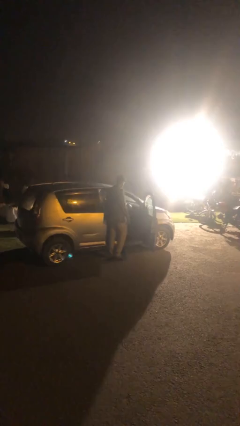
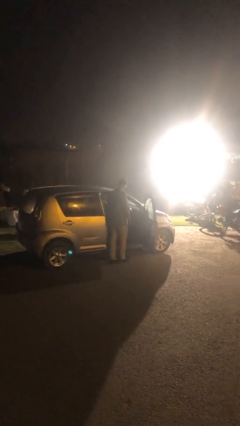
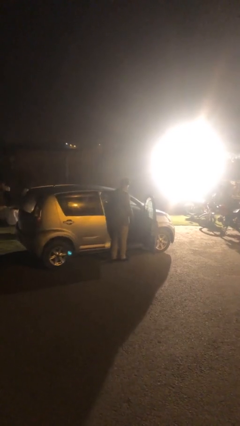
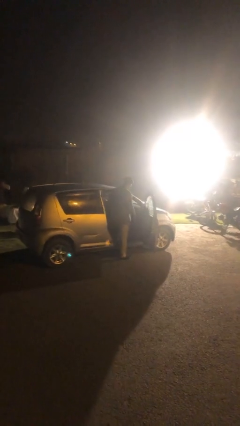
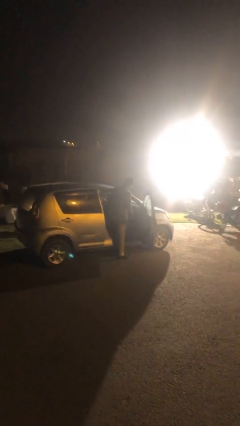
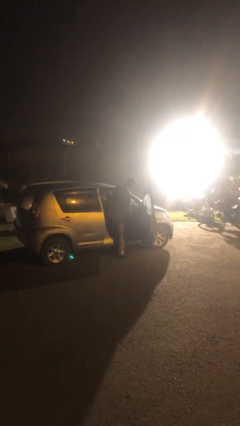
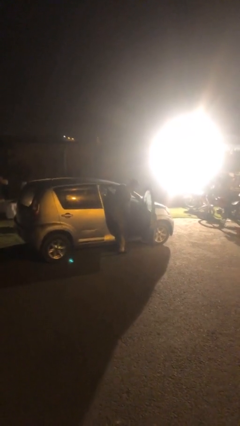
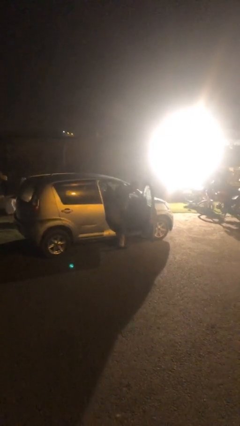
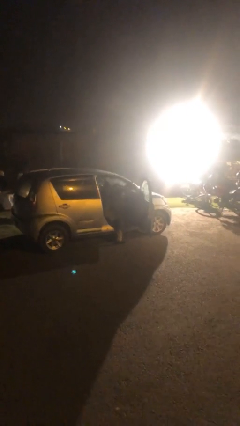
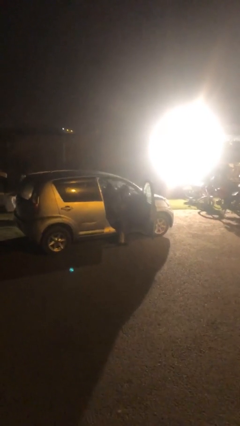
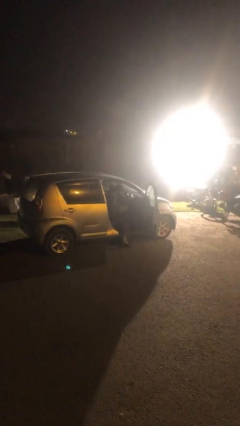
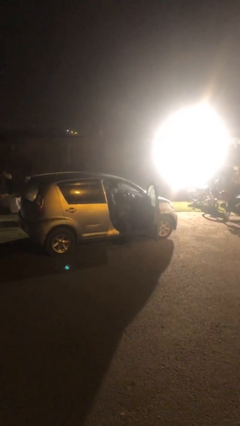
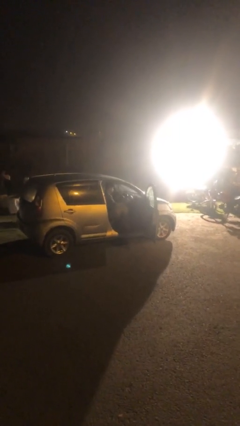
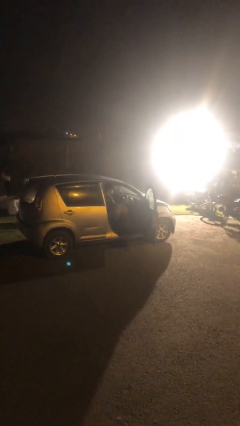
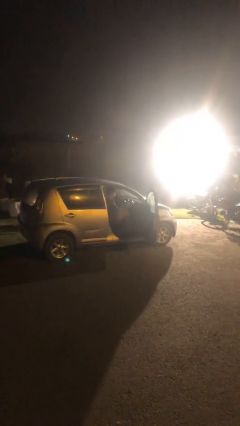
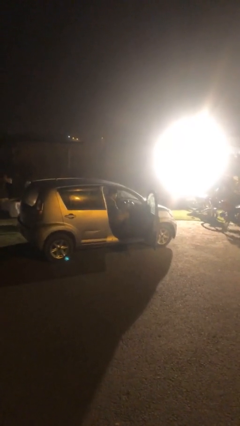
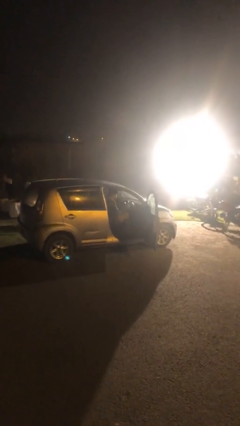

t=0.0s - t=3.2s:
person enters car

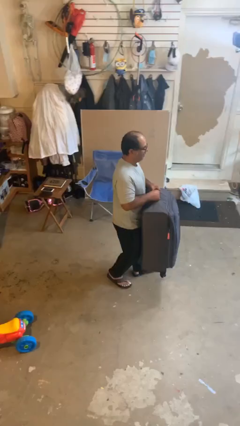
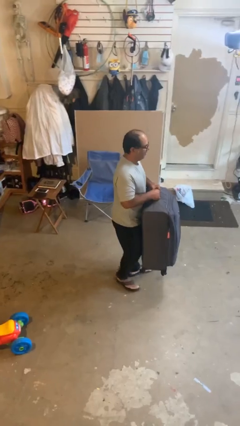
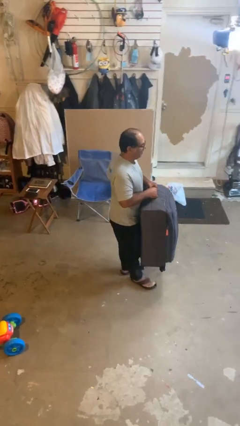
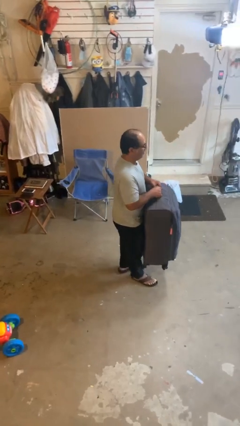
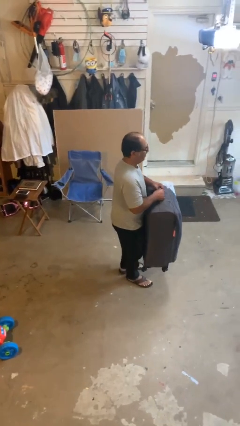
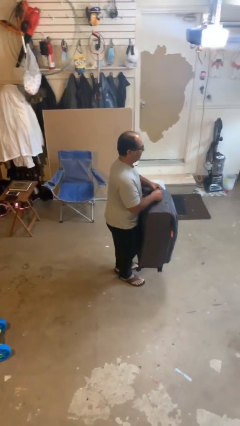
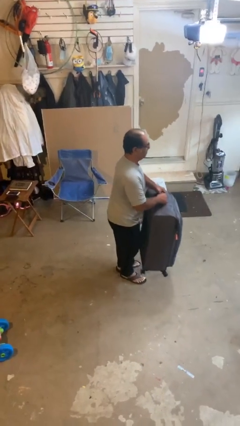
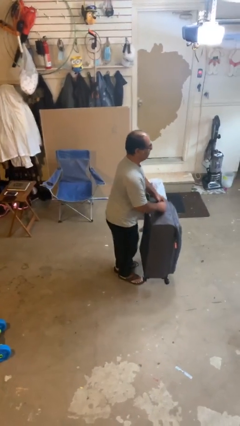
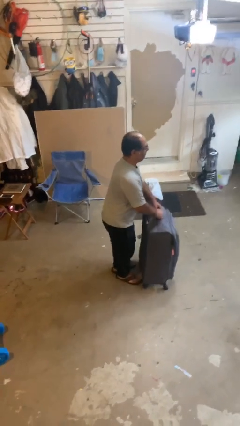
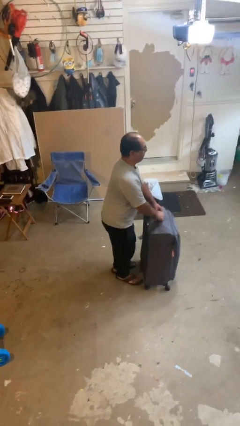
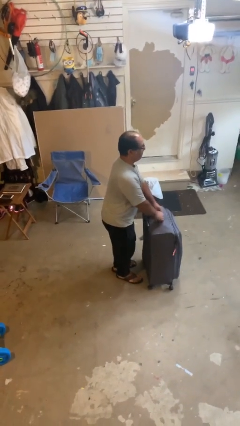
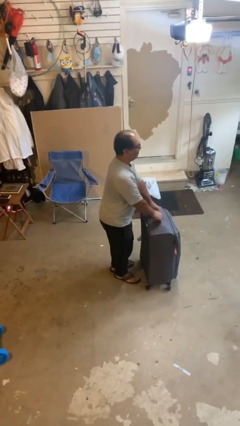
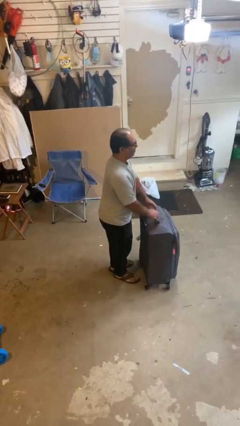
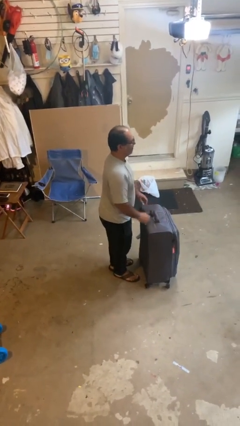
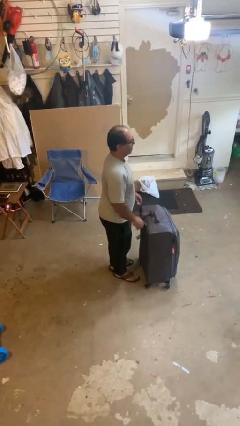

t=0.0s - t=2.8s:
person puts down object on floor

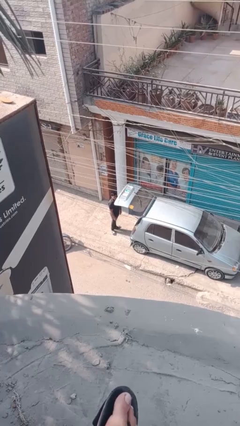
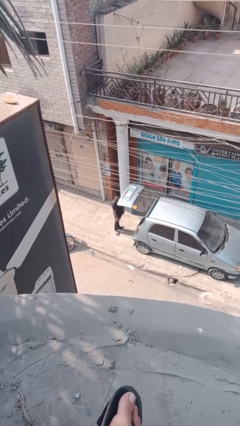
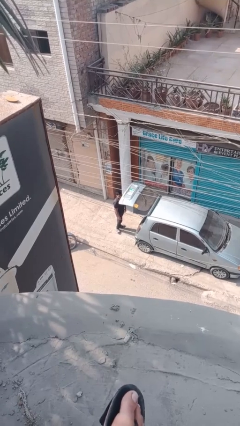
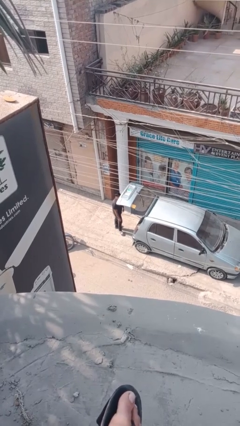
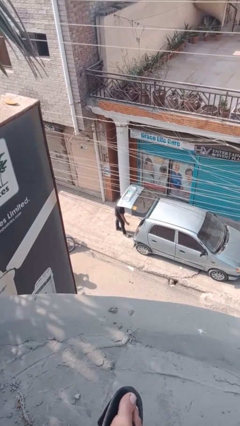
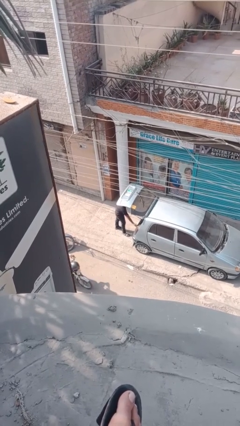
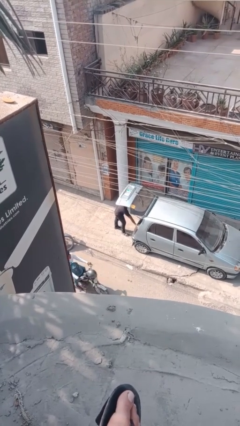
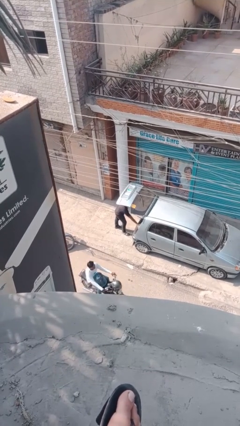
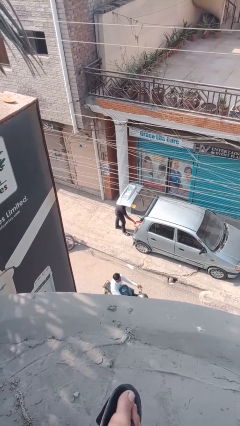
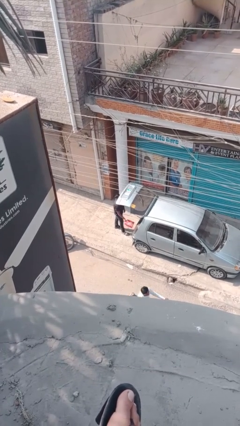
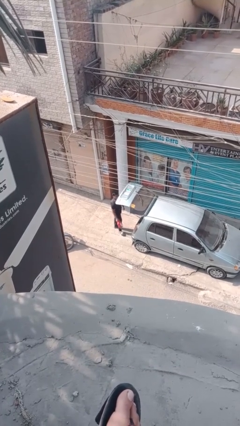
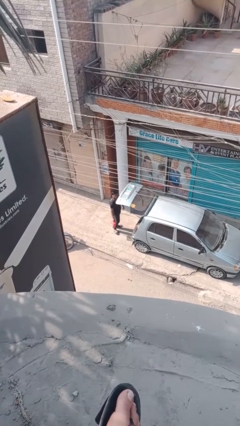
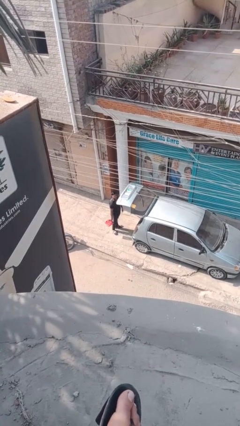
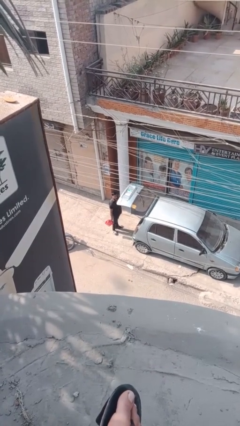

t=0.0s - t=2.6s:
person unloads car

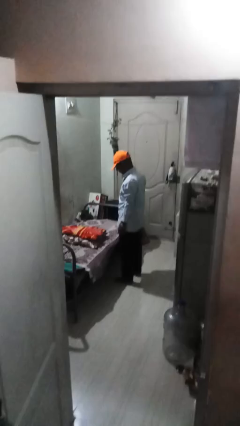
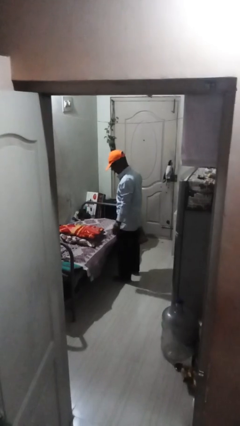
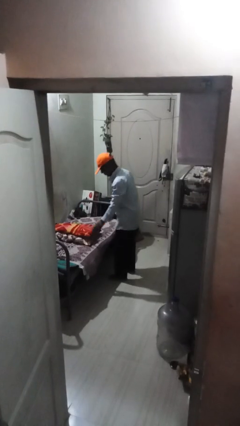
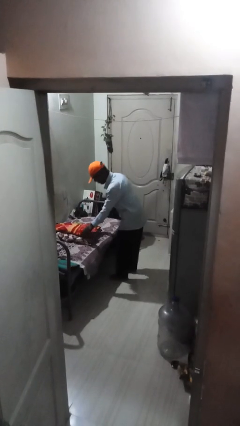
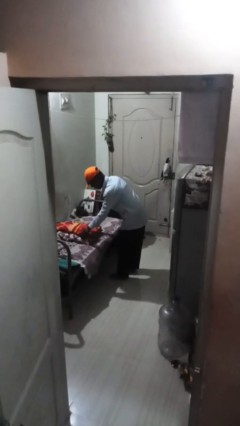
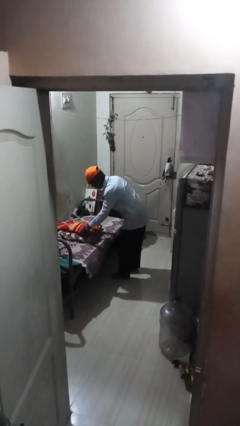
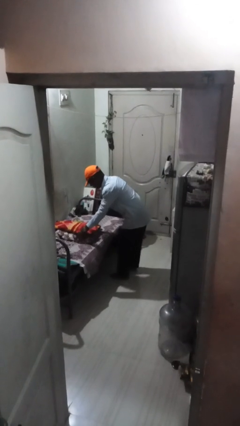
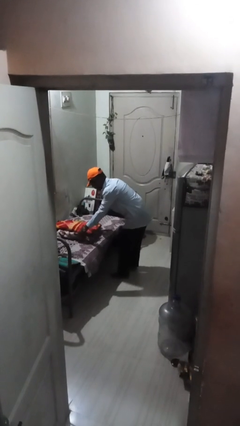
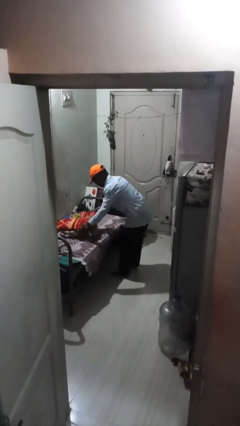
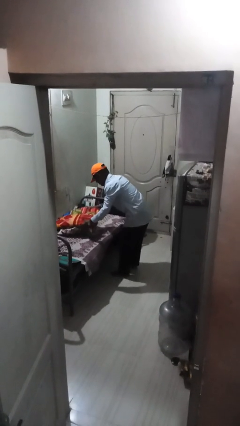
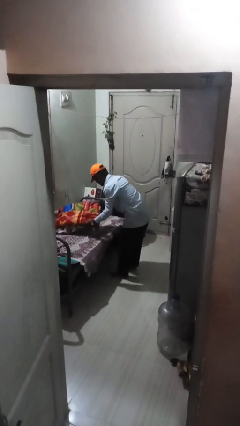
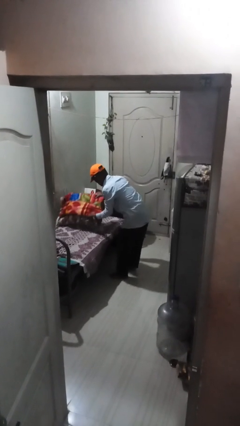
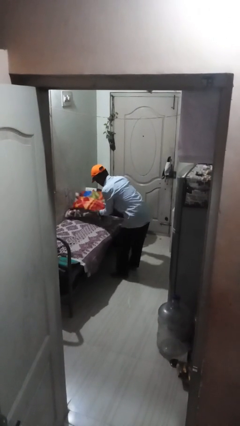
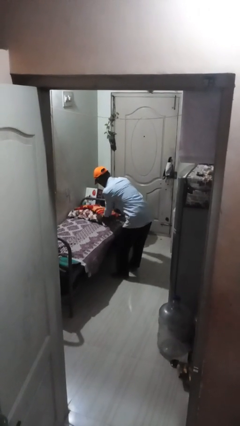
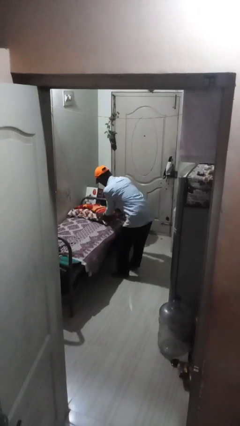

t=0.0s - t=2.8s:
person makes bed

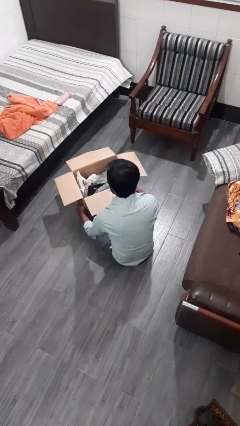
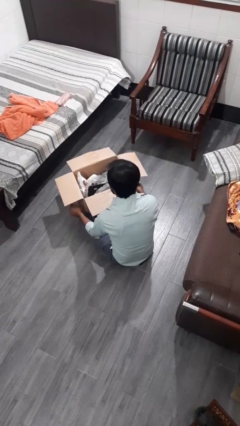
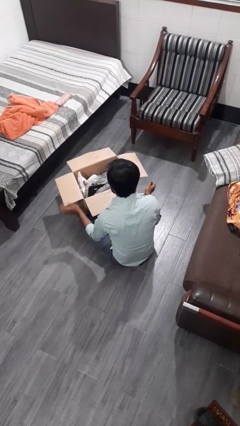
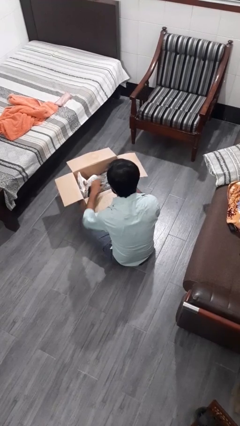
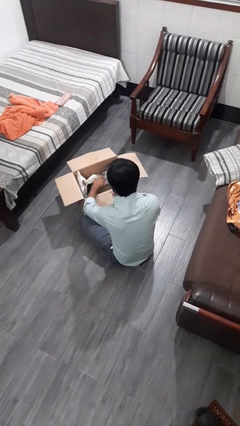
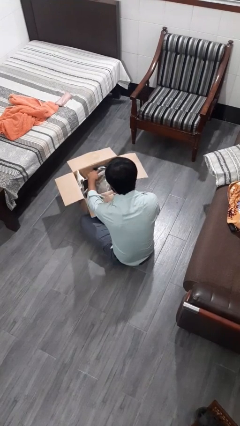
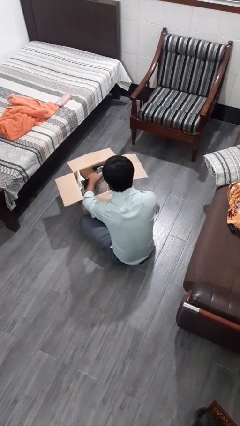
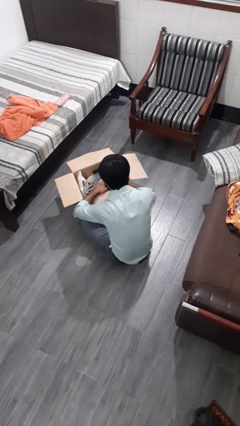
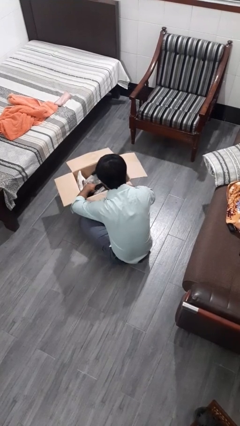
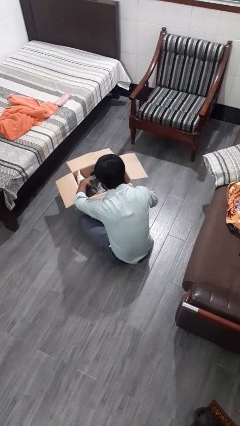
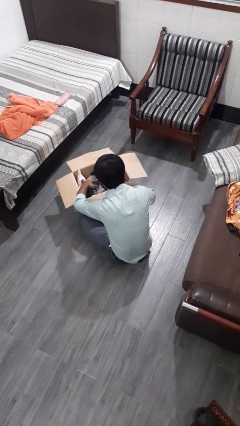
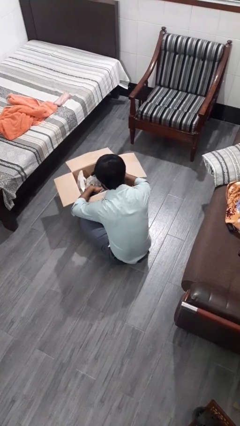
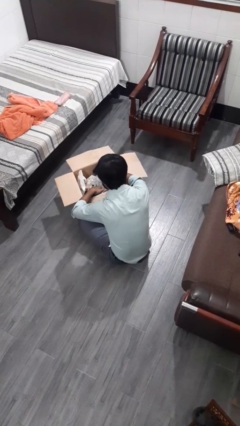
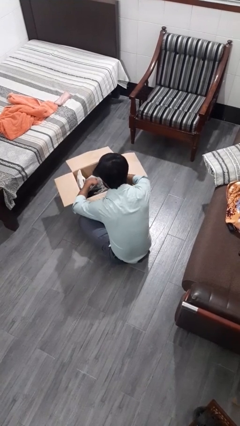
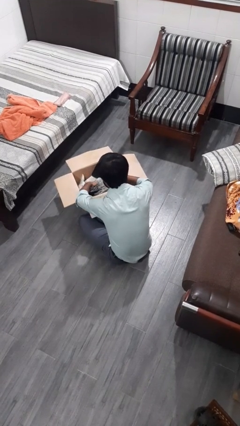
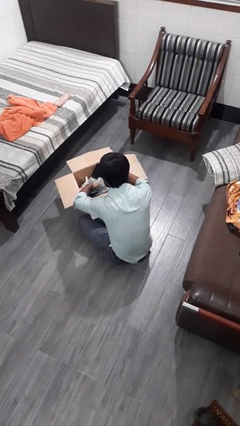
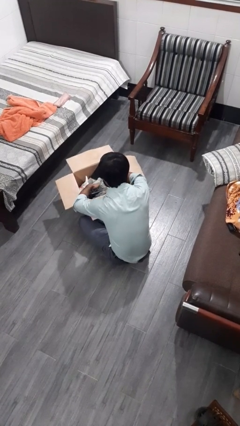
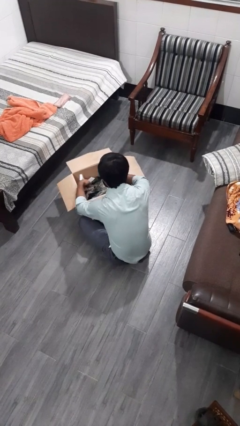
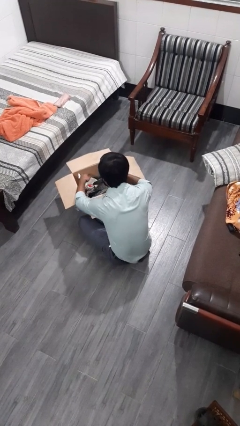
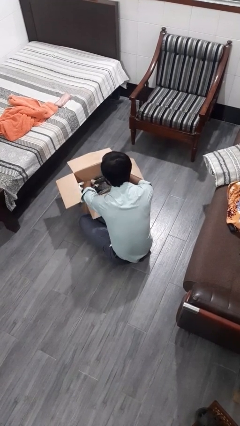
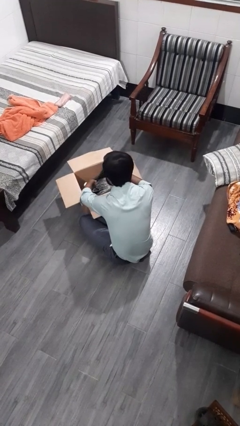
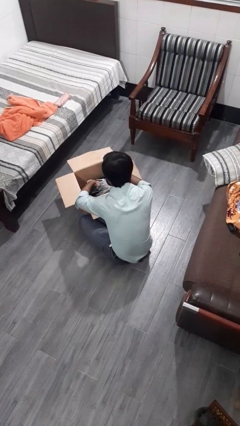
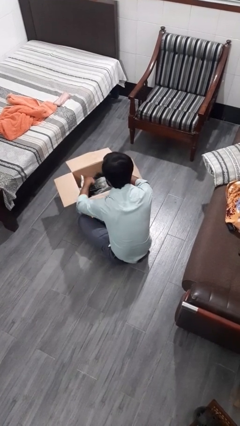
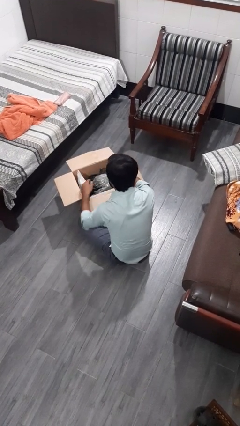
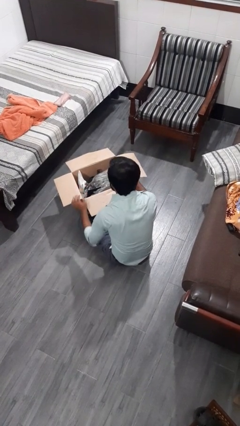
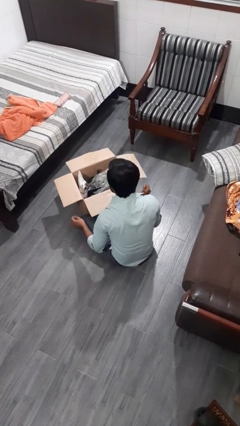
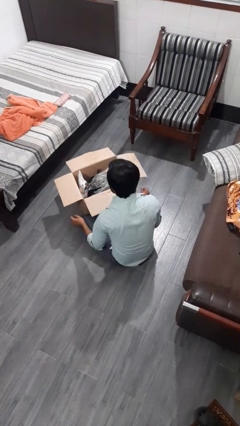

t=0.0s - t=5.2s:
person searches in box

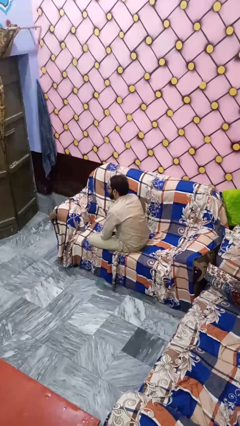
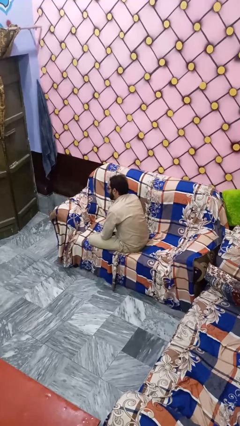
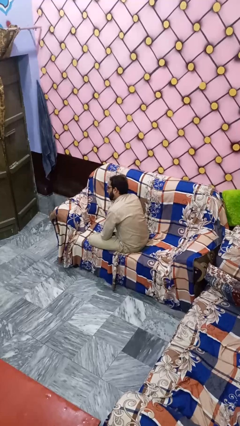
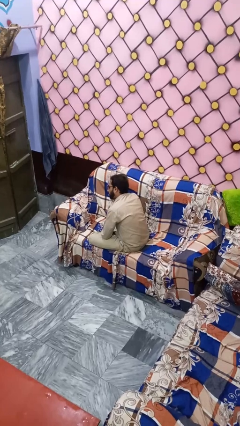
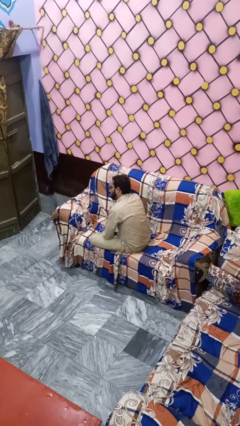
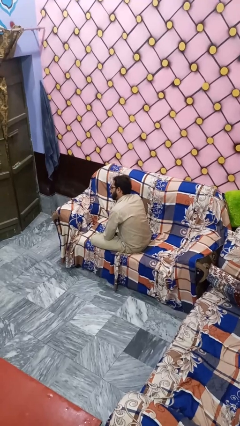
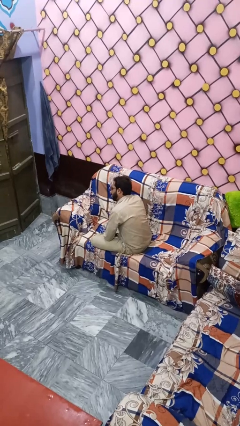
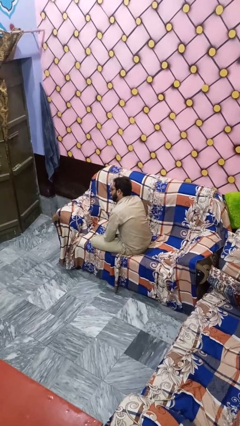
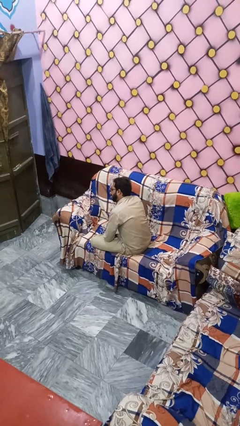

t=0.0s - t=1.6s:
person sticks out tongue
